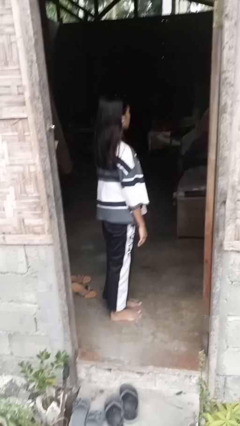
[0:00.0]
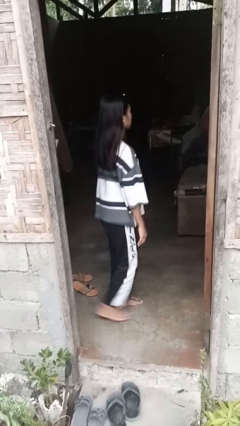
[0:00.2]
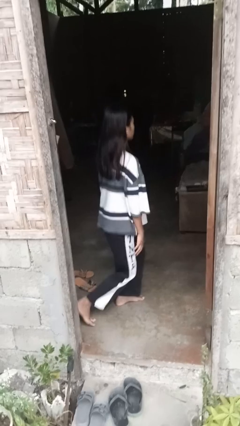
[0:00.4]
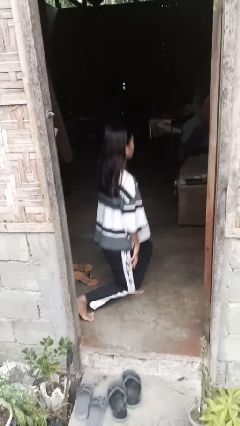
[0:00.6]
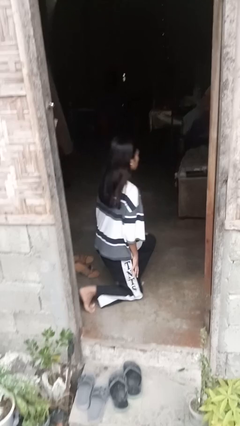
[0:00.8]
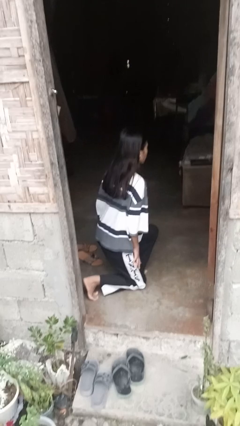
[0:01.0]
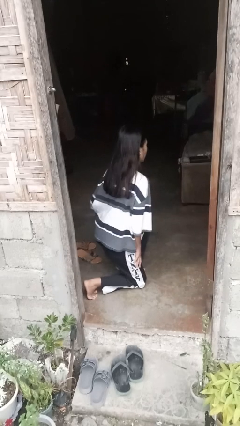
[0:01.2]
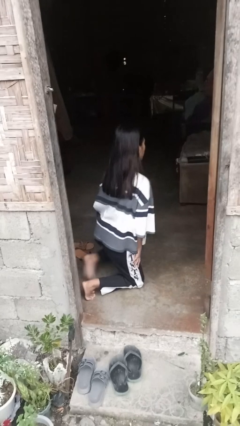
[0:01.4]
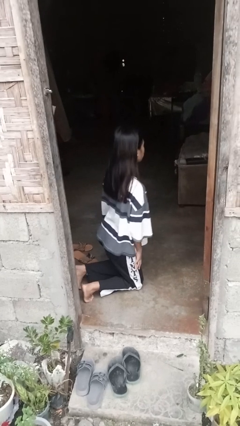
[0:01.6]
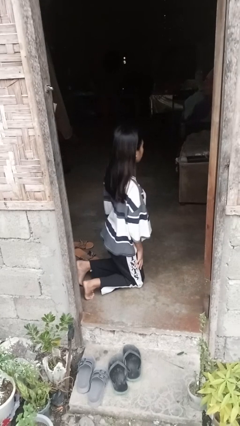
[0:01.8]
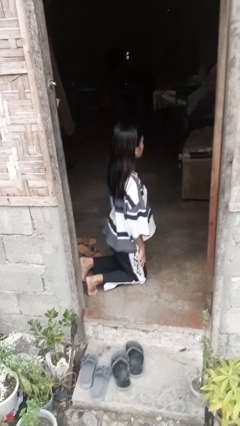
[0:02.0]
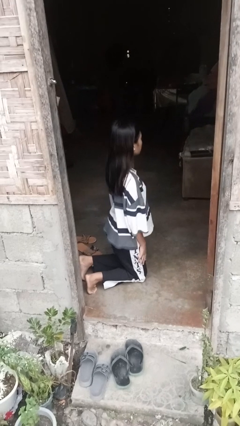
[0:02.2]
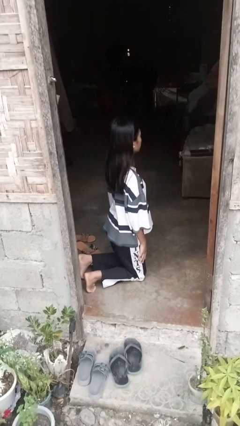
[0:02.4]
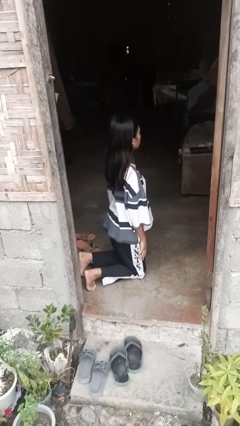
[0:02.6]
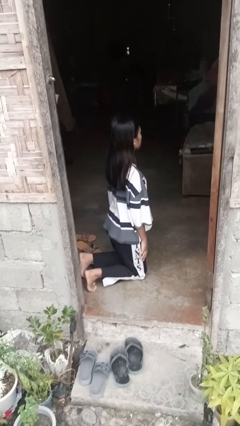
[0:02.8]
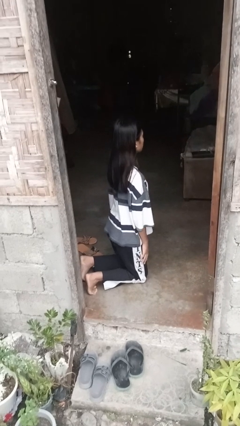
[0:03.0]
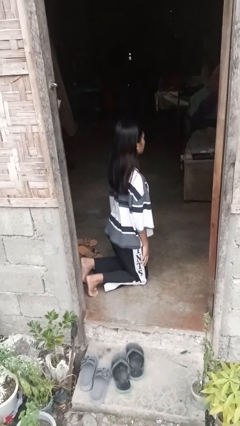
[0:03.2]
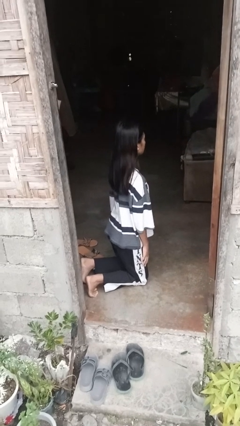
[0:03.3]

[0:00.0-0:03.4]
person kneels

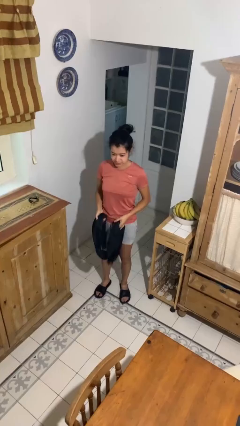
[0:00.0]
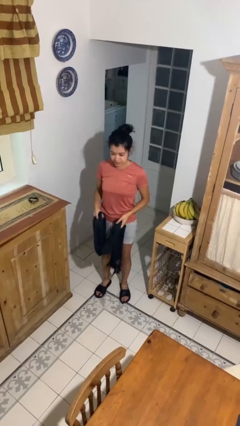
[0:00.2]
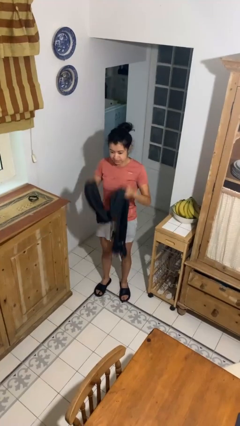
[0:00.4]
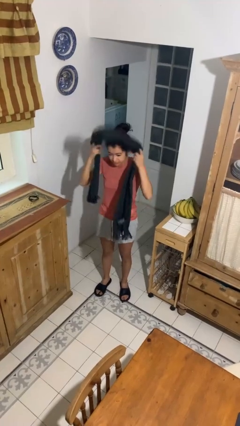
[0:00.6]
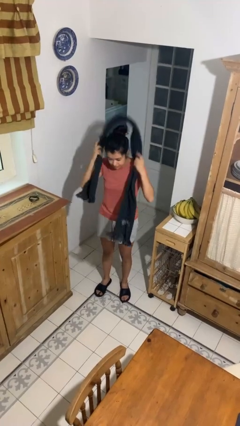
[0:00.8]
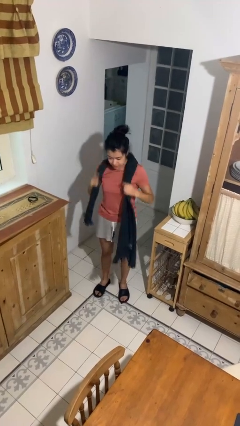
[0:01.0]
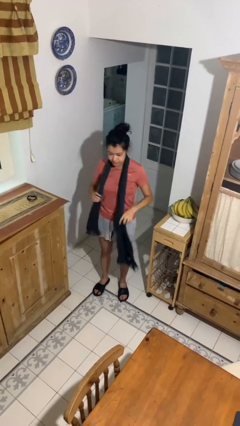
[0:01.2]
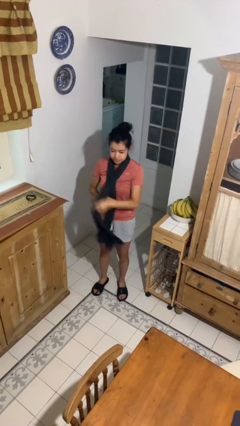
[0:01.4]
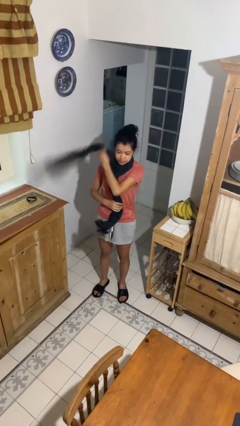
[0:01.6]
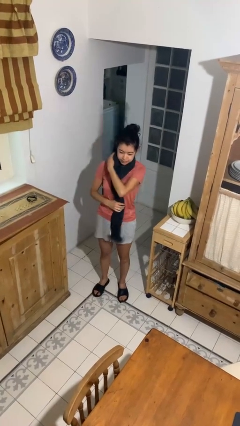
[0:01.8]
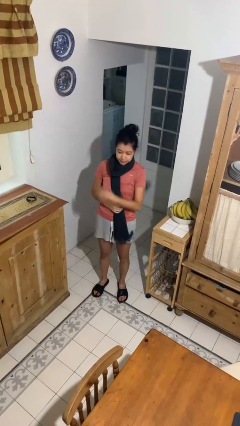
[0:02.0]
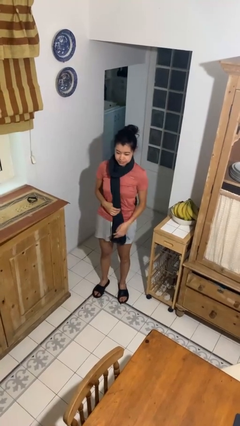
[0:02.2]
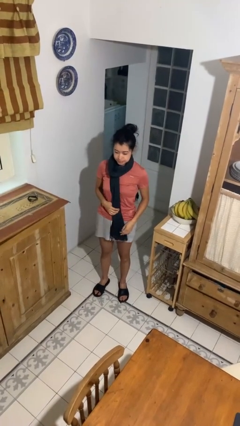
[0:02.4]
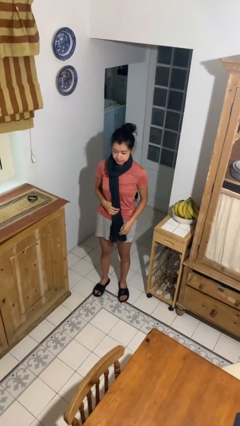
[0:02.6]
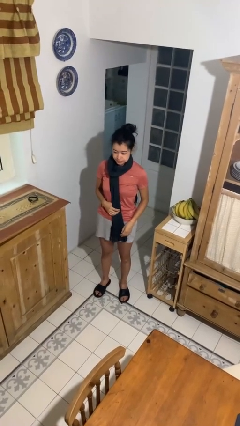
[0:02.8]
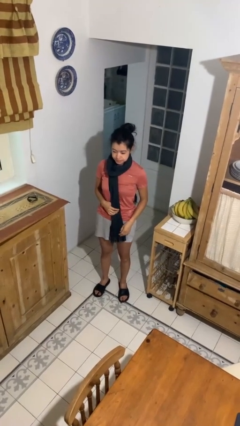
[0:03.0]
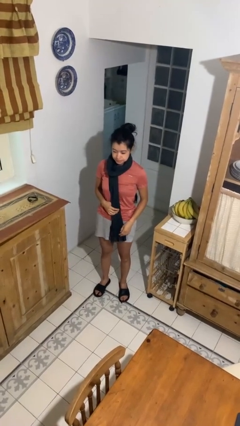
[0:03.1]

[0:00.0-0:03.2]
person puts on scarf

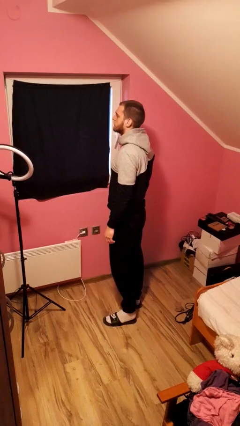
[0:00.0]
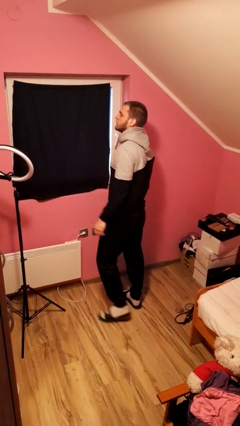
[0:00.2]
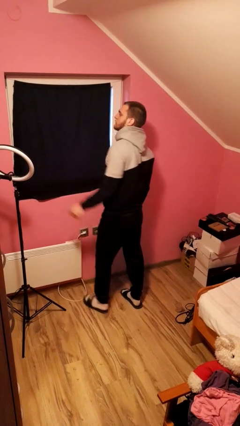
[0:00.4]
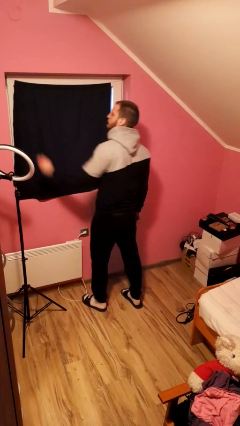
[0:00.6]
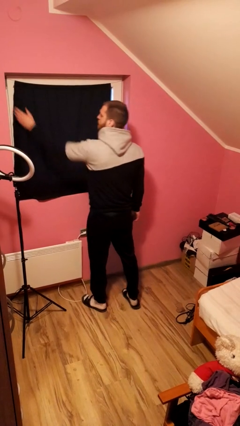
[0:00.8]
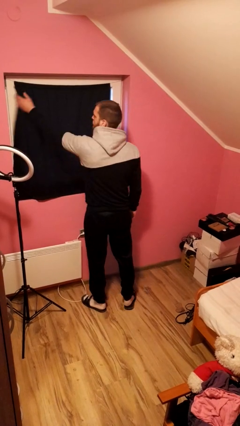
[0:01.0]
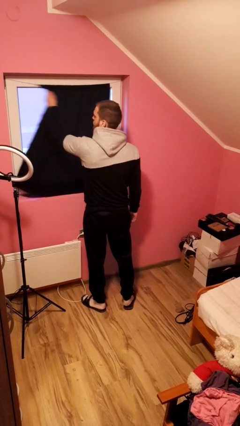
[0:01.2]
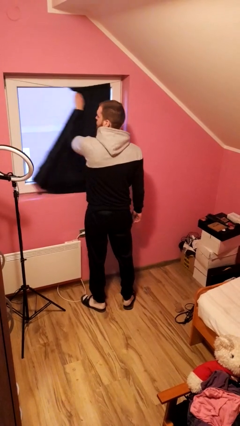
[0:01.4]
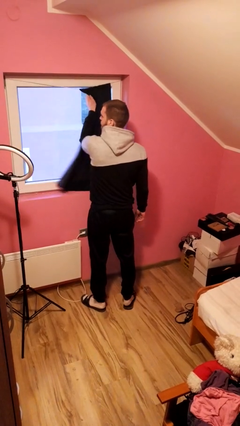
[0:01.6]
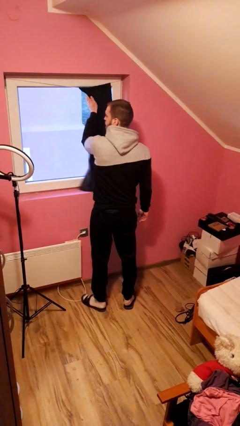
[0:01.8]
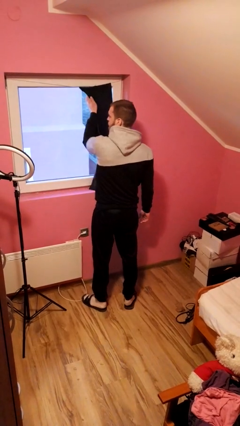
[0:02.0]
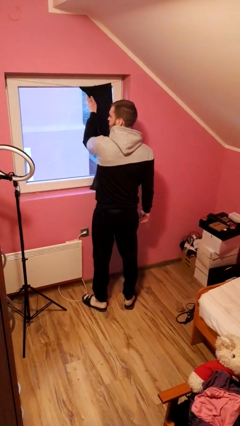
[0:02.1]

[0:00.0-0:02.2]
person opens curtains

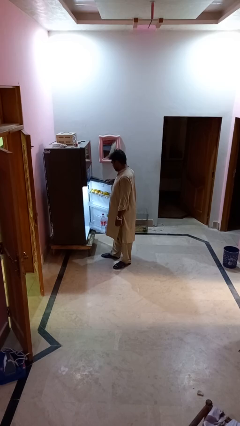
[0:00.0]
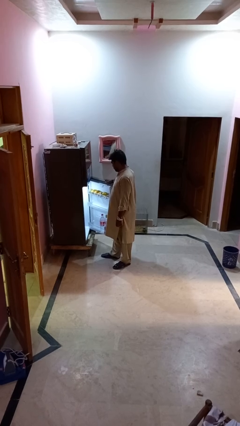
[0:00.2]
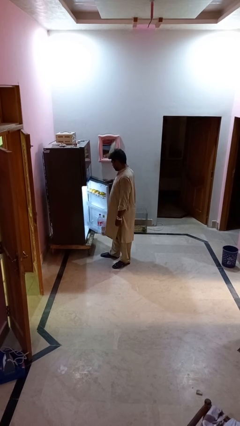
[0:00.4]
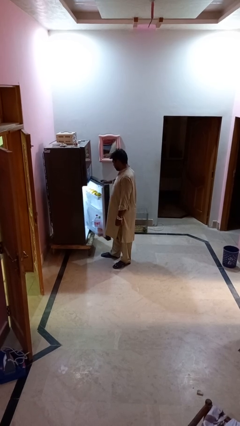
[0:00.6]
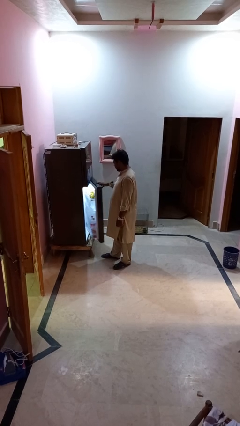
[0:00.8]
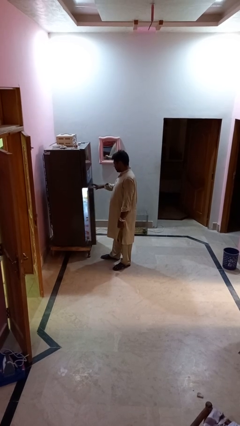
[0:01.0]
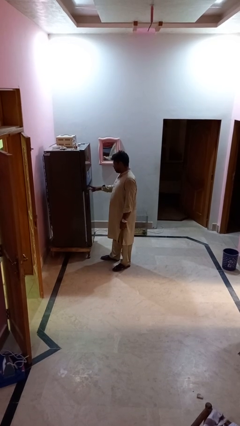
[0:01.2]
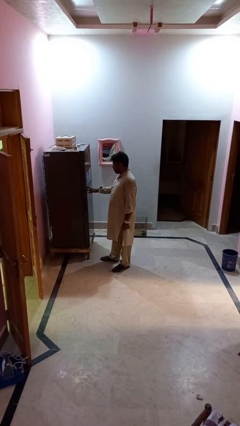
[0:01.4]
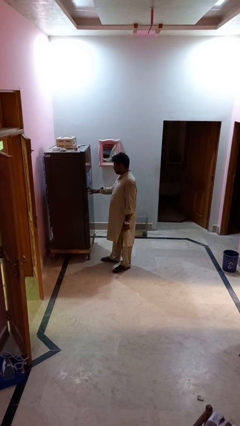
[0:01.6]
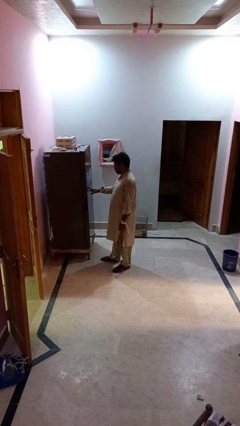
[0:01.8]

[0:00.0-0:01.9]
person closes refrigerator

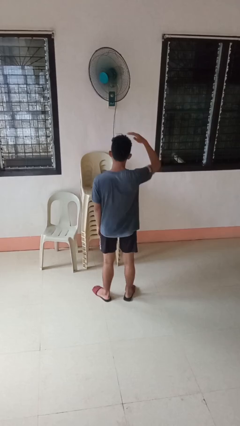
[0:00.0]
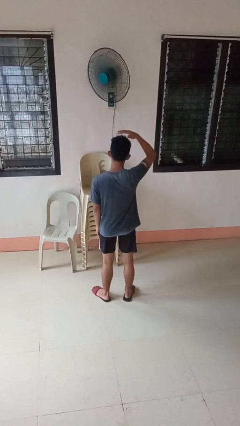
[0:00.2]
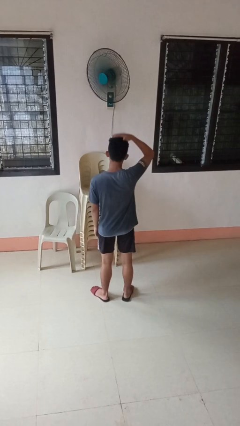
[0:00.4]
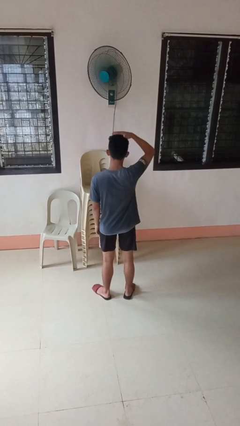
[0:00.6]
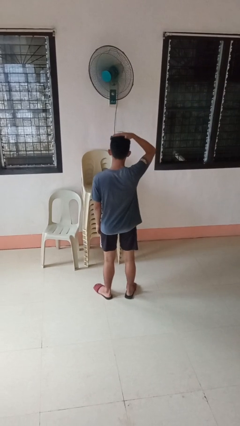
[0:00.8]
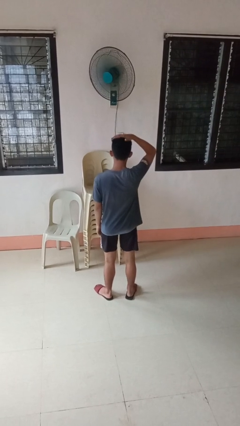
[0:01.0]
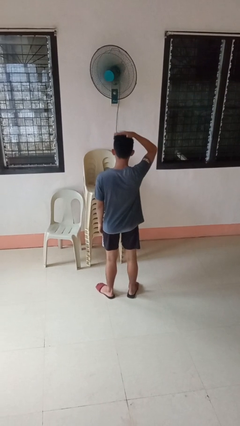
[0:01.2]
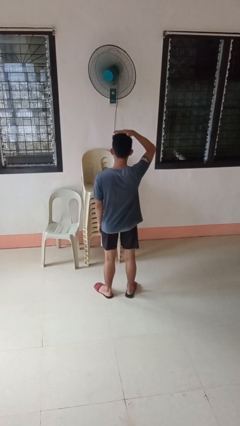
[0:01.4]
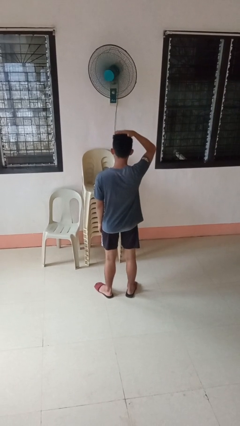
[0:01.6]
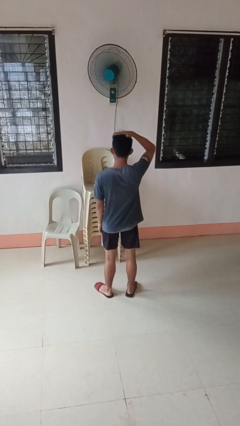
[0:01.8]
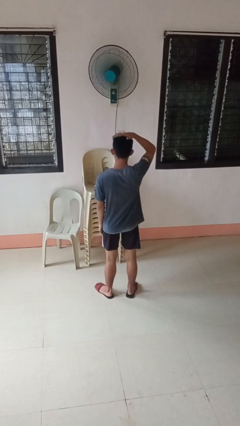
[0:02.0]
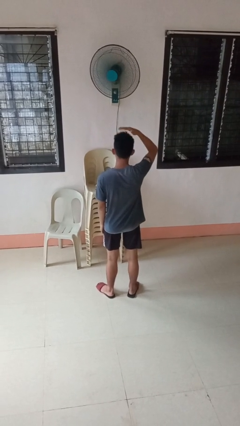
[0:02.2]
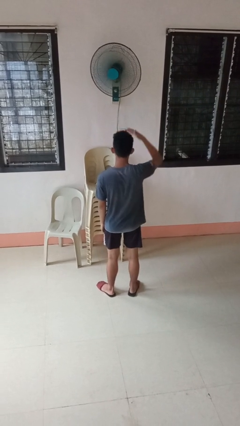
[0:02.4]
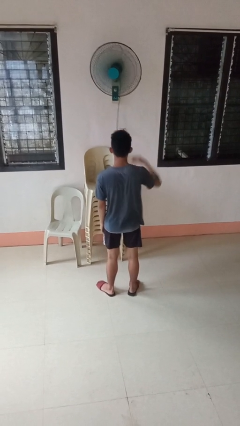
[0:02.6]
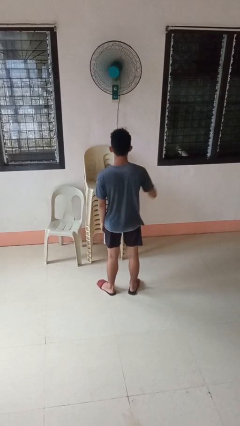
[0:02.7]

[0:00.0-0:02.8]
person pats head

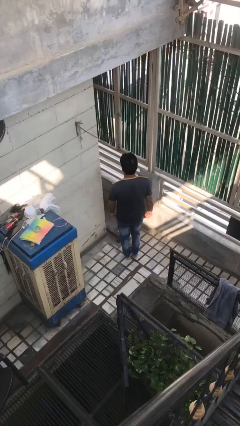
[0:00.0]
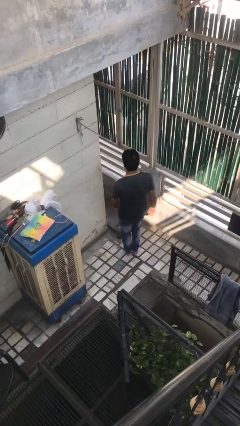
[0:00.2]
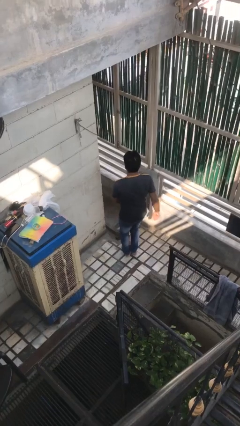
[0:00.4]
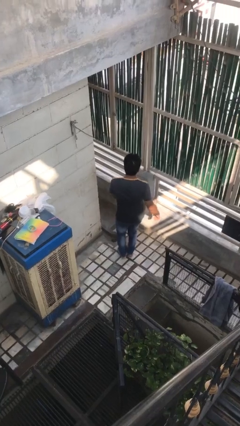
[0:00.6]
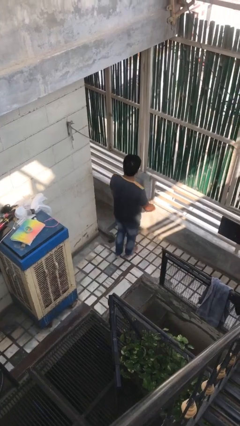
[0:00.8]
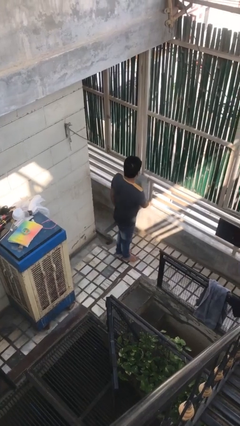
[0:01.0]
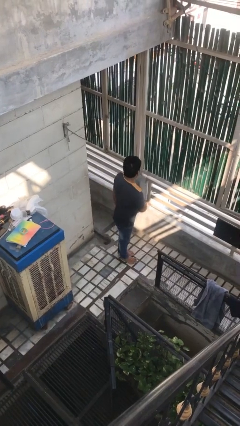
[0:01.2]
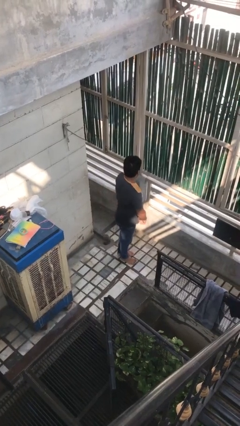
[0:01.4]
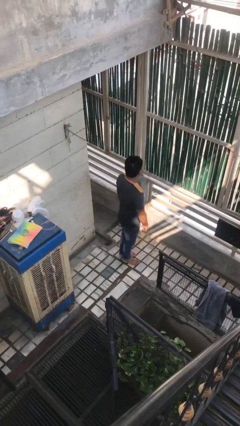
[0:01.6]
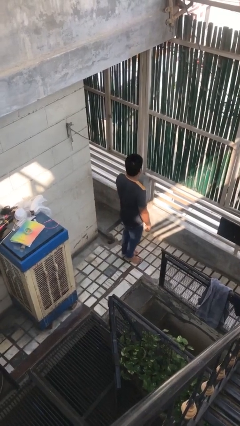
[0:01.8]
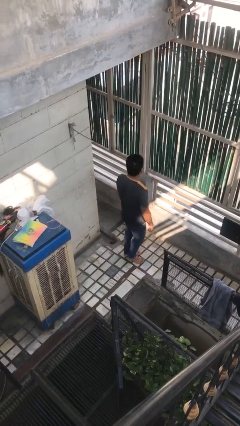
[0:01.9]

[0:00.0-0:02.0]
person twirls

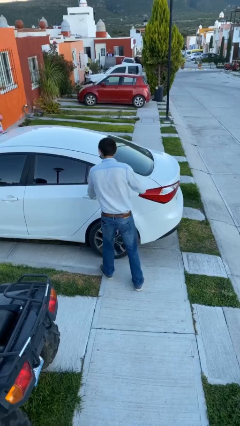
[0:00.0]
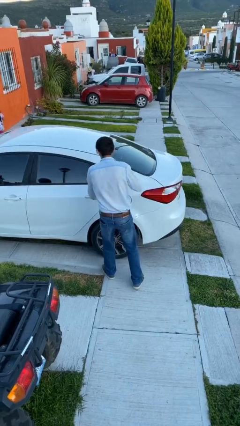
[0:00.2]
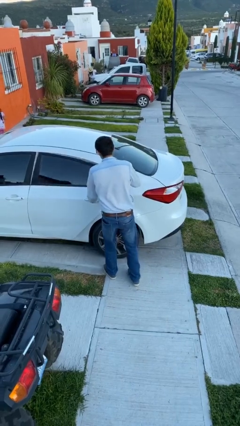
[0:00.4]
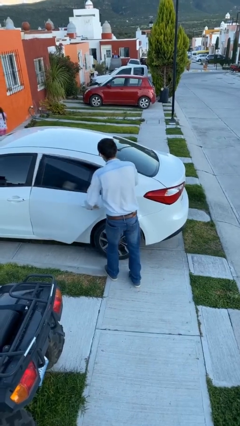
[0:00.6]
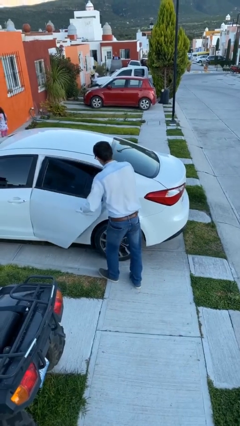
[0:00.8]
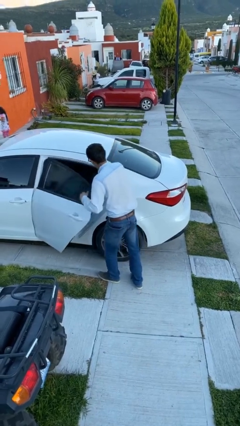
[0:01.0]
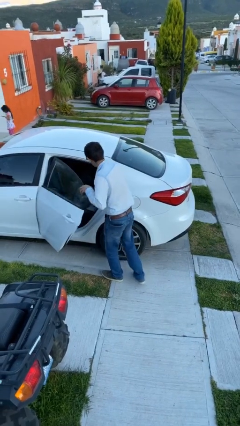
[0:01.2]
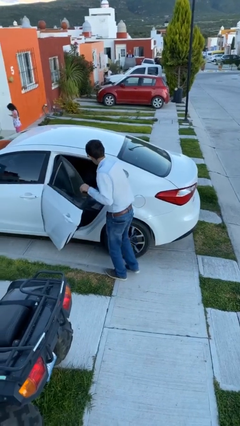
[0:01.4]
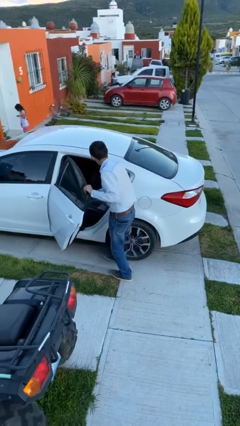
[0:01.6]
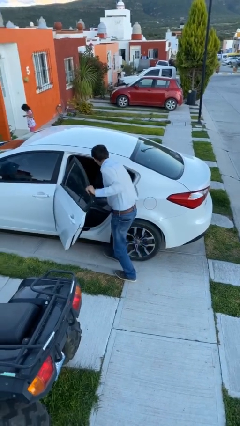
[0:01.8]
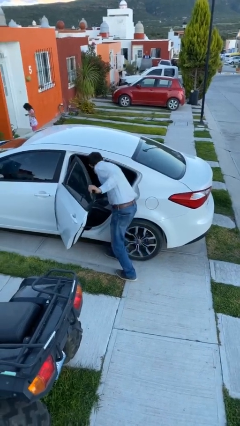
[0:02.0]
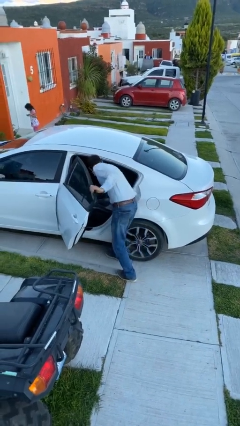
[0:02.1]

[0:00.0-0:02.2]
person opens car door
